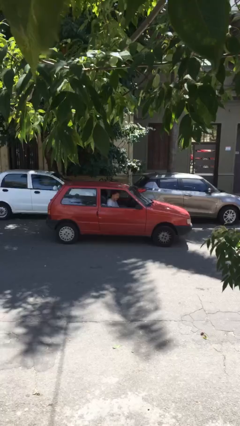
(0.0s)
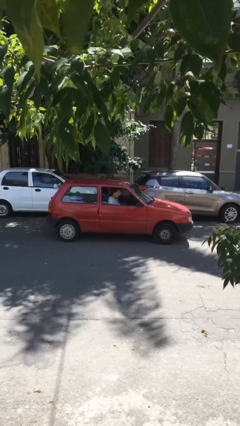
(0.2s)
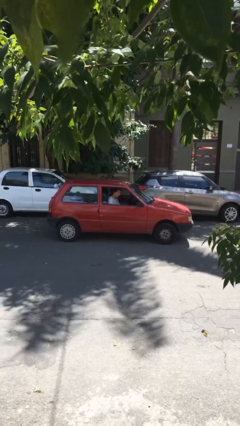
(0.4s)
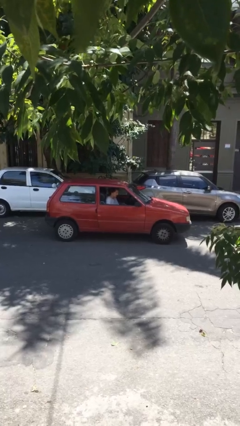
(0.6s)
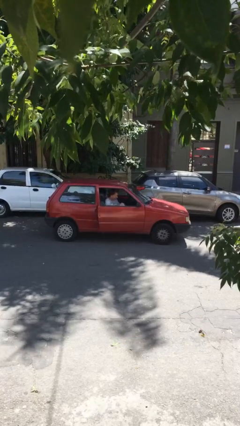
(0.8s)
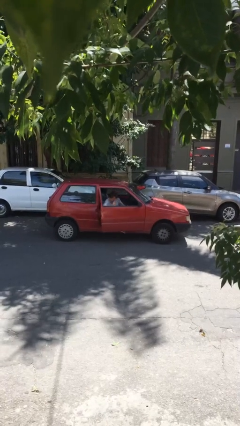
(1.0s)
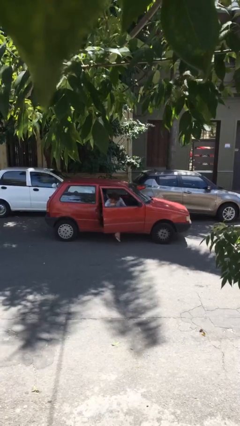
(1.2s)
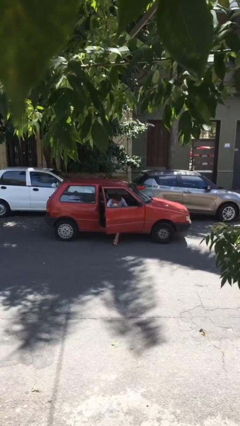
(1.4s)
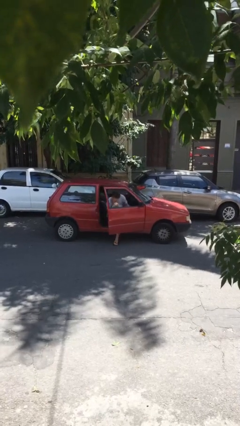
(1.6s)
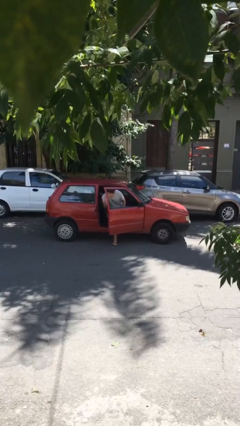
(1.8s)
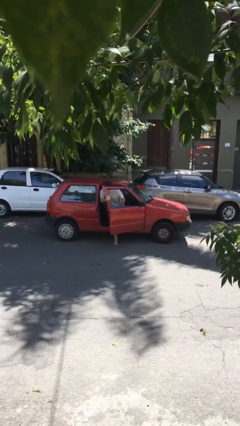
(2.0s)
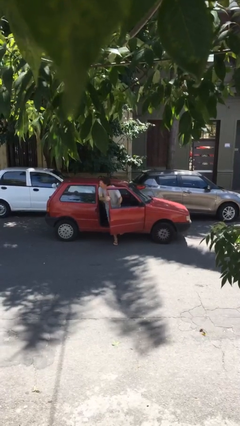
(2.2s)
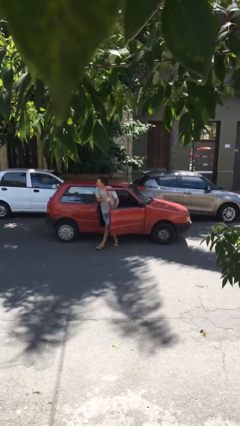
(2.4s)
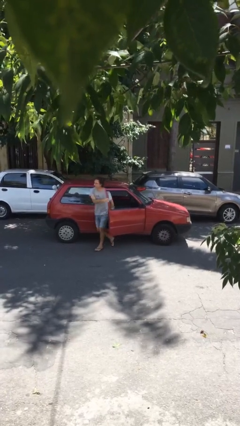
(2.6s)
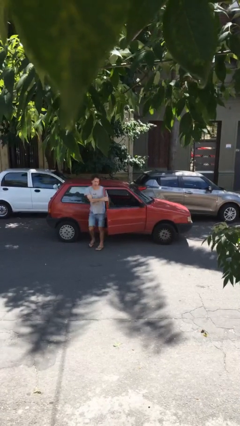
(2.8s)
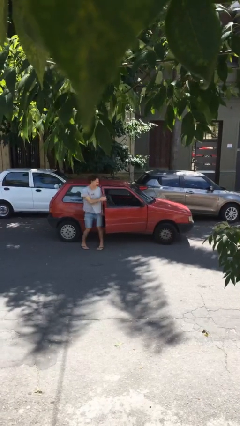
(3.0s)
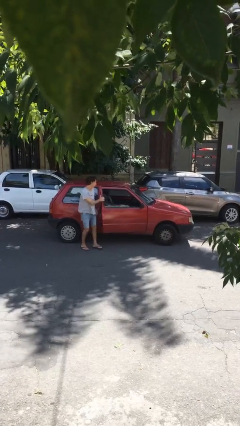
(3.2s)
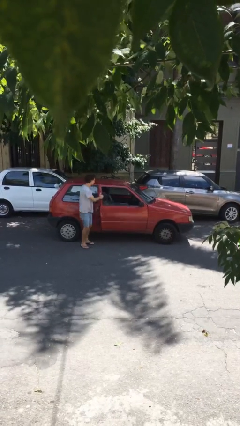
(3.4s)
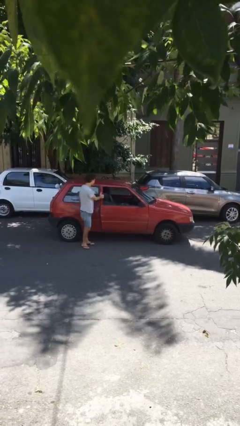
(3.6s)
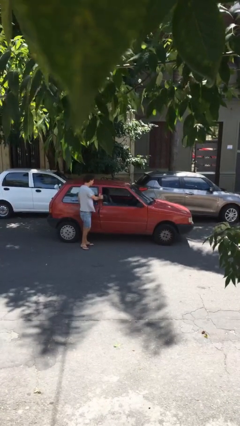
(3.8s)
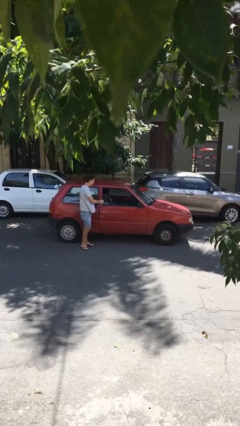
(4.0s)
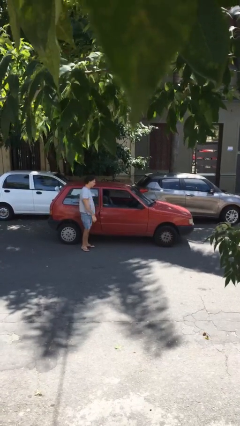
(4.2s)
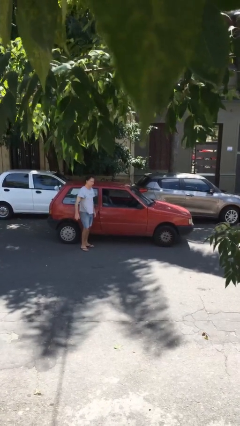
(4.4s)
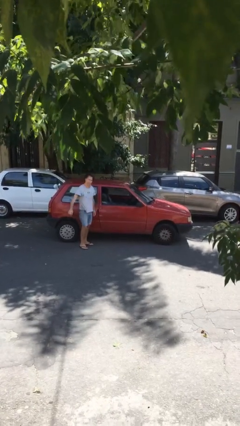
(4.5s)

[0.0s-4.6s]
car drops off person

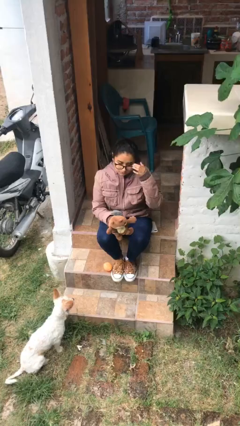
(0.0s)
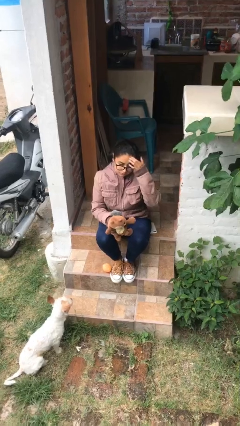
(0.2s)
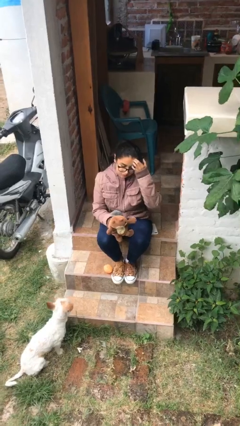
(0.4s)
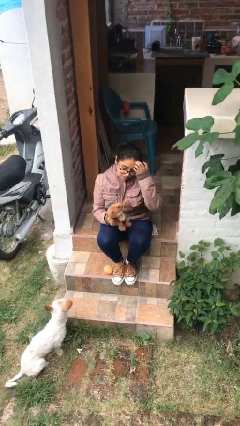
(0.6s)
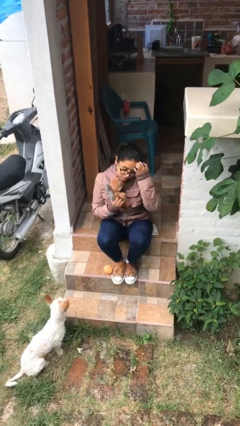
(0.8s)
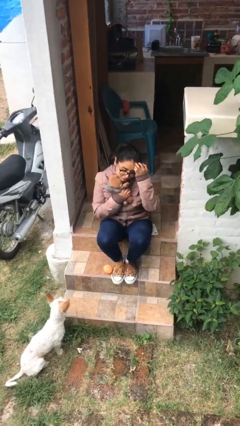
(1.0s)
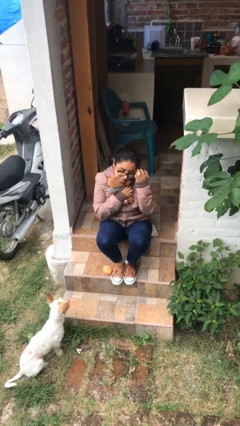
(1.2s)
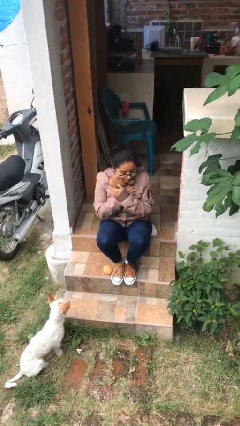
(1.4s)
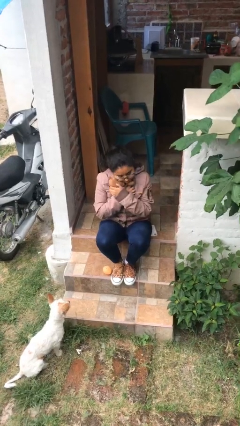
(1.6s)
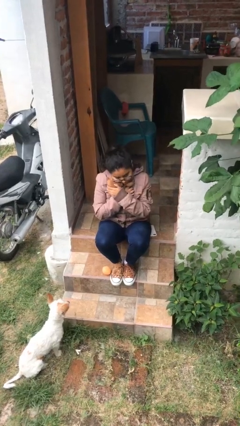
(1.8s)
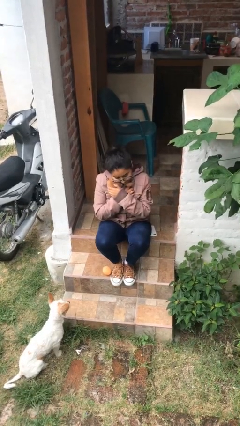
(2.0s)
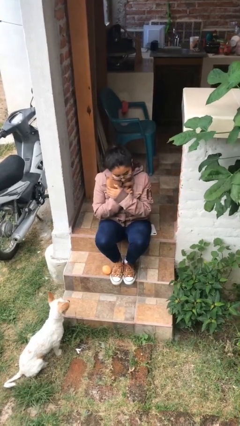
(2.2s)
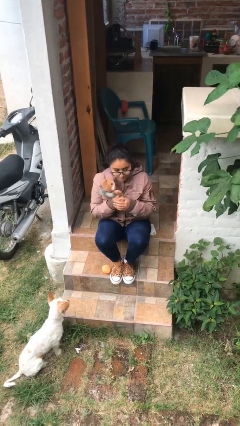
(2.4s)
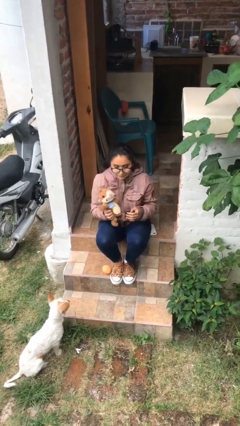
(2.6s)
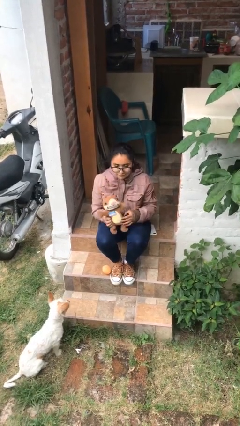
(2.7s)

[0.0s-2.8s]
person hugs stuffed animal

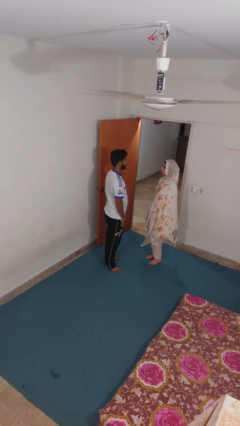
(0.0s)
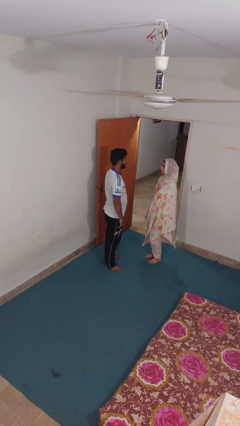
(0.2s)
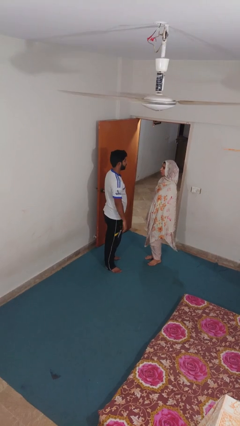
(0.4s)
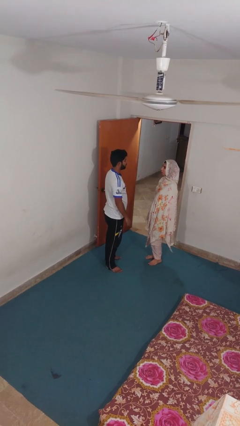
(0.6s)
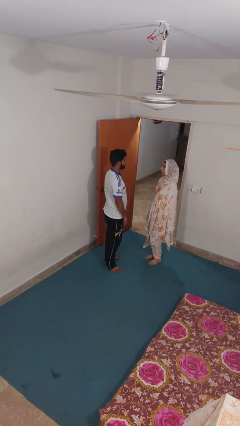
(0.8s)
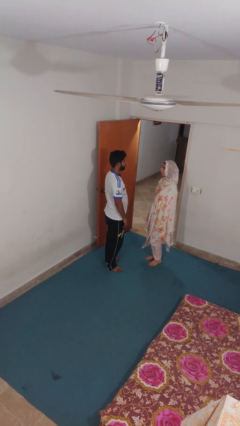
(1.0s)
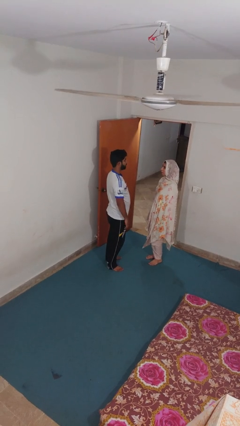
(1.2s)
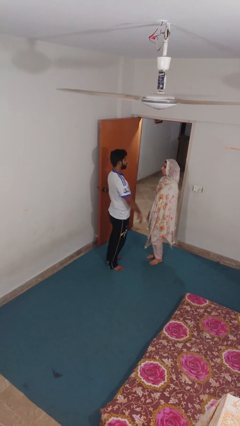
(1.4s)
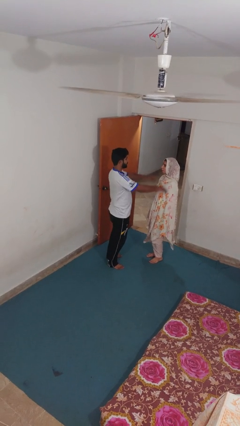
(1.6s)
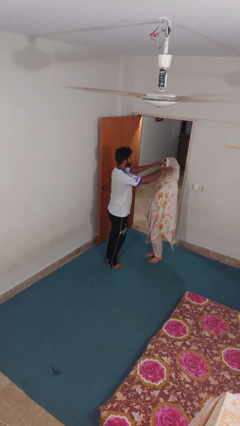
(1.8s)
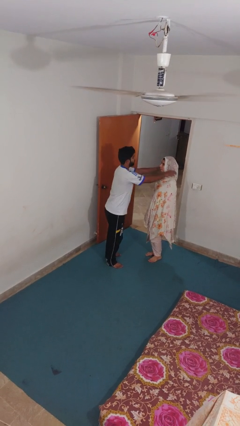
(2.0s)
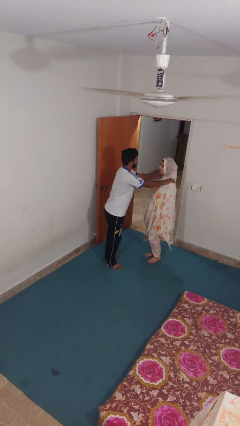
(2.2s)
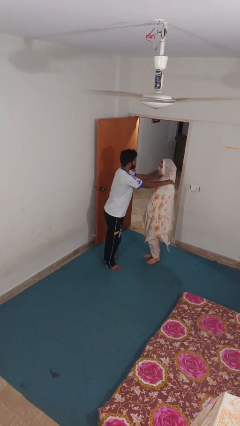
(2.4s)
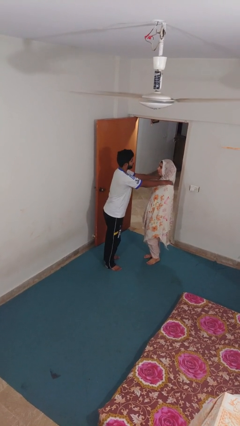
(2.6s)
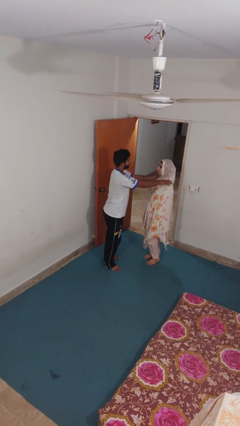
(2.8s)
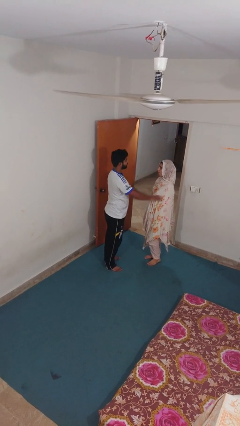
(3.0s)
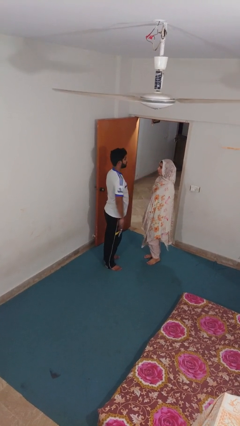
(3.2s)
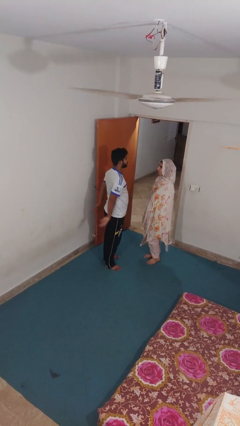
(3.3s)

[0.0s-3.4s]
person pounds shoulders of person

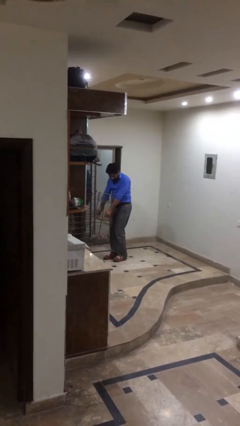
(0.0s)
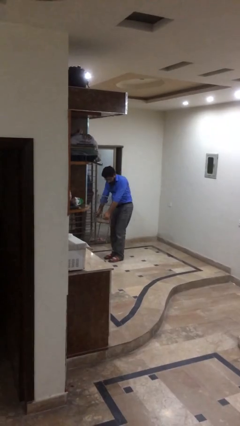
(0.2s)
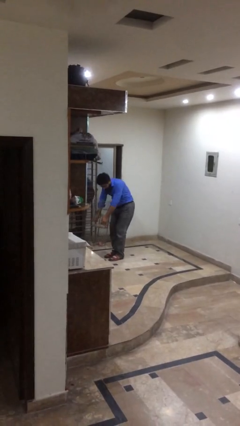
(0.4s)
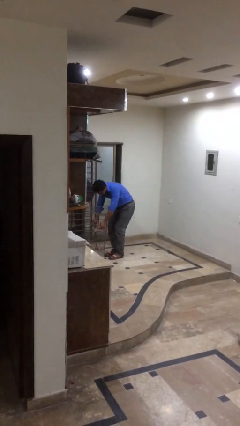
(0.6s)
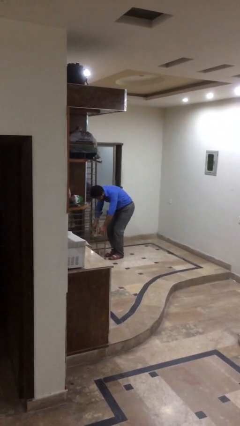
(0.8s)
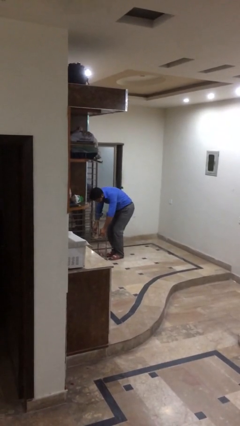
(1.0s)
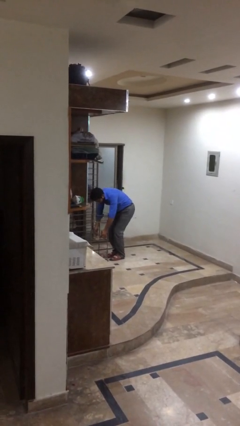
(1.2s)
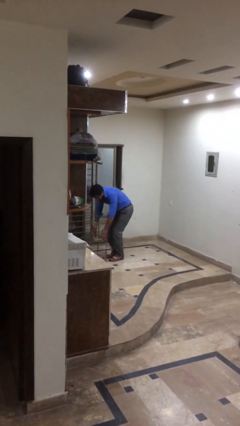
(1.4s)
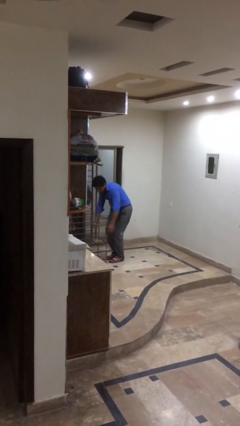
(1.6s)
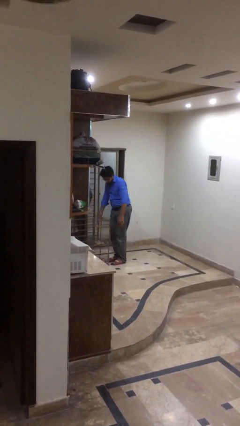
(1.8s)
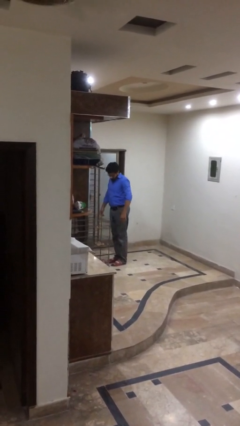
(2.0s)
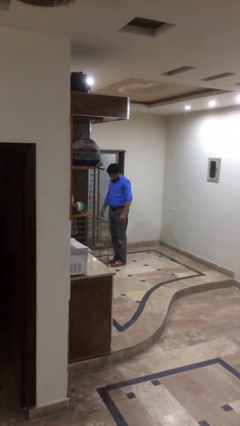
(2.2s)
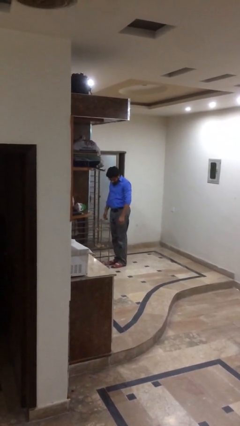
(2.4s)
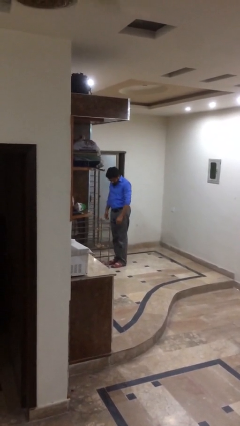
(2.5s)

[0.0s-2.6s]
person puts down object on floor

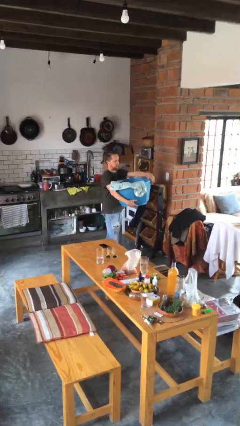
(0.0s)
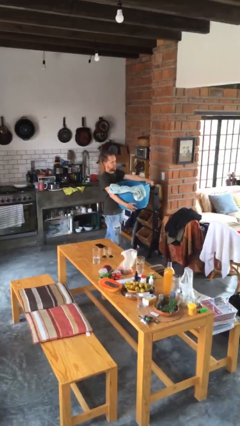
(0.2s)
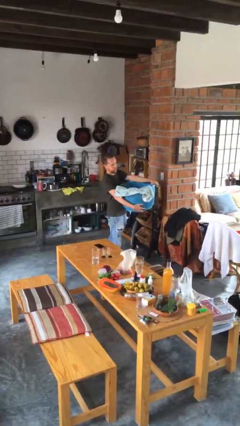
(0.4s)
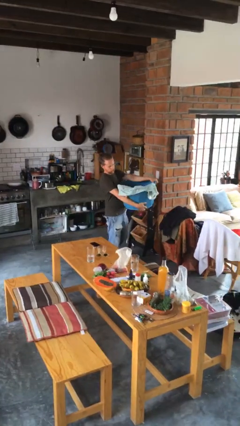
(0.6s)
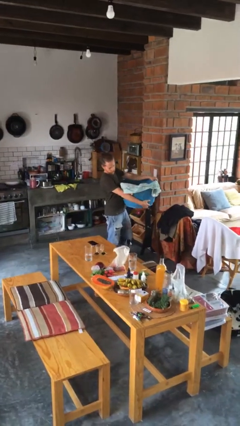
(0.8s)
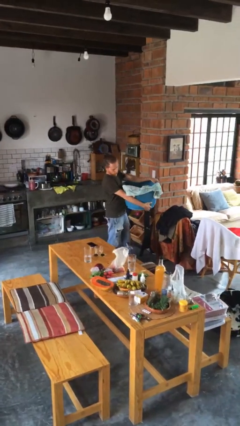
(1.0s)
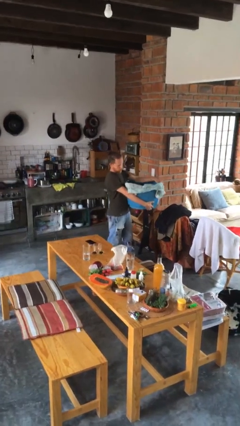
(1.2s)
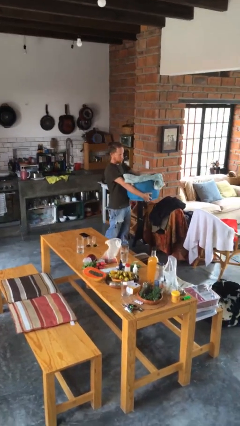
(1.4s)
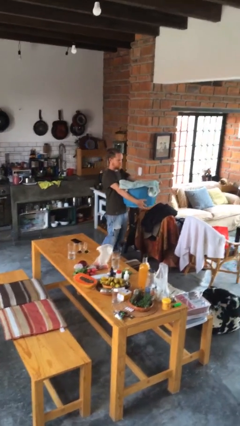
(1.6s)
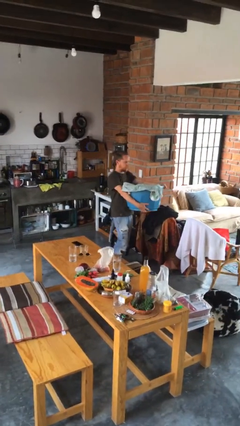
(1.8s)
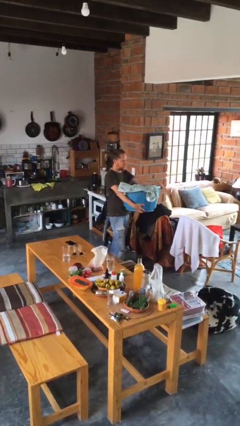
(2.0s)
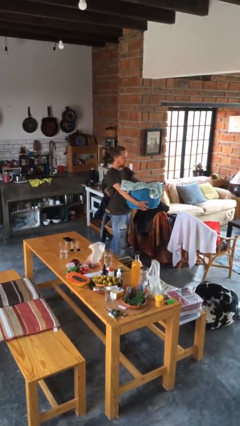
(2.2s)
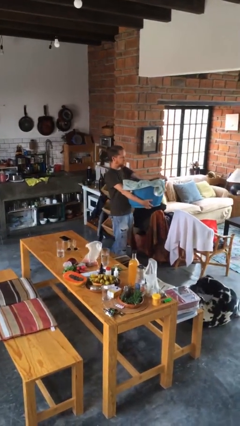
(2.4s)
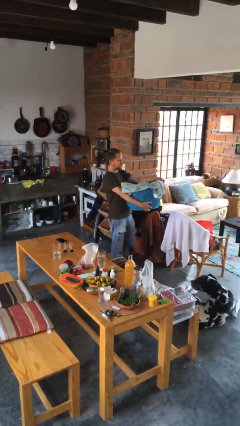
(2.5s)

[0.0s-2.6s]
person carries laundry basket

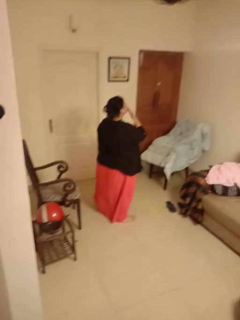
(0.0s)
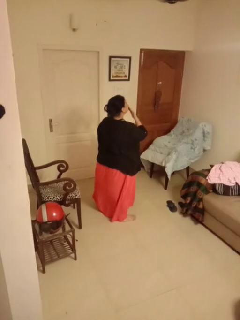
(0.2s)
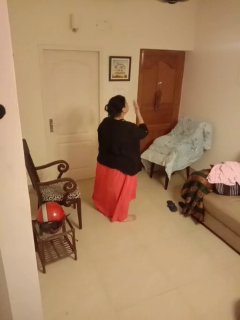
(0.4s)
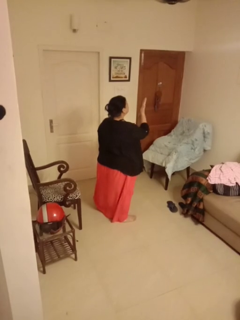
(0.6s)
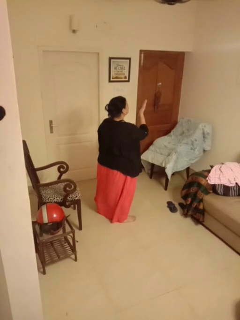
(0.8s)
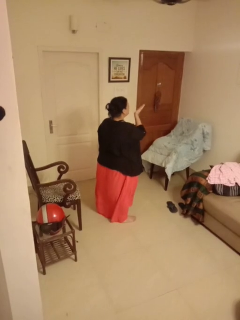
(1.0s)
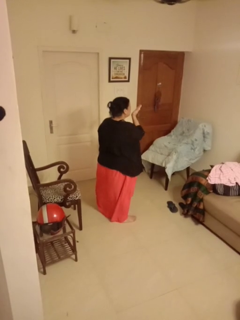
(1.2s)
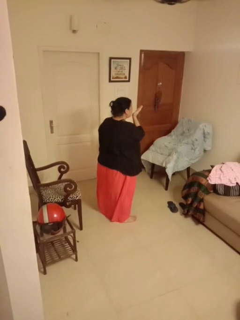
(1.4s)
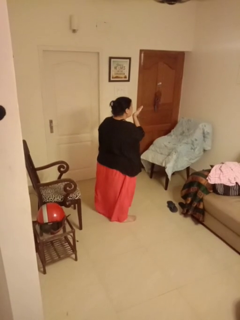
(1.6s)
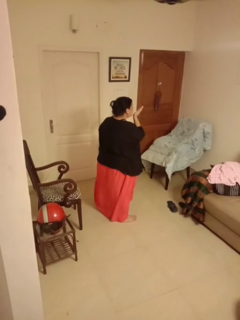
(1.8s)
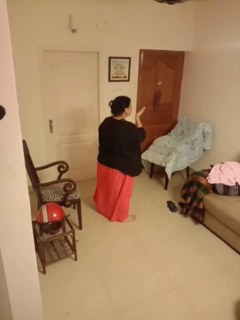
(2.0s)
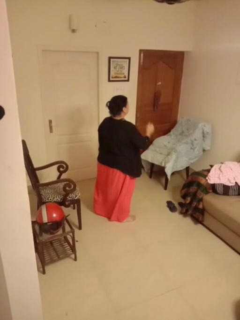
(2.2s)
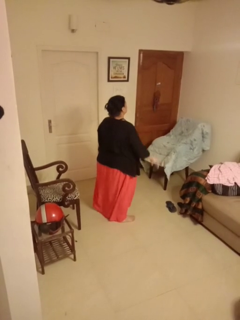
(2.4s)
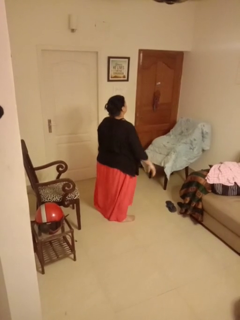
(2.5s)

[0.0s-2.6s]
person gestures blow kiss
